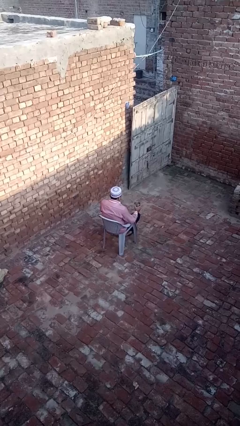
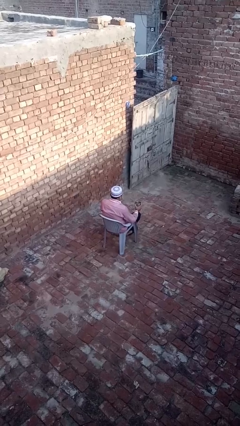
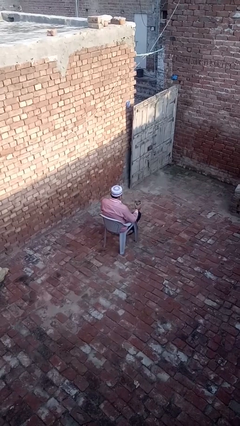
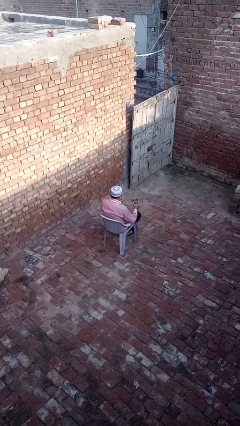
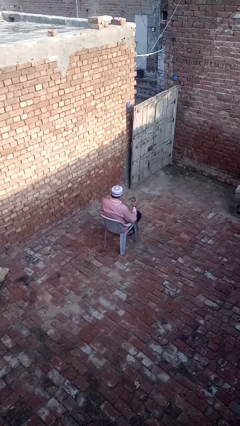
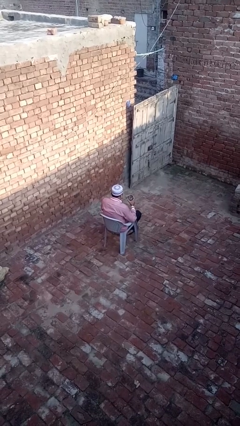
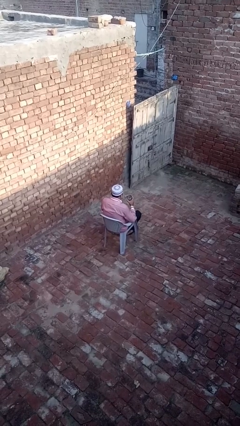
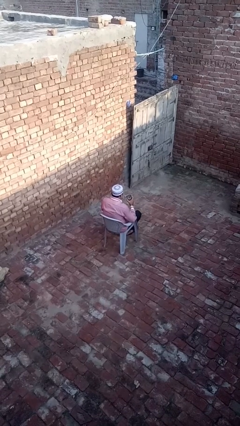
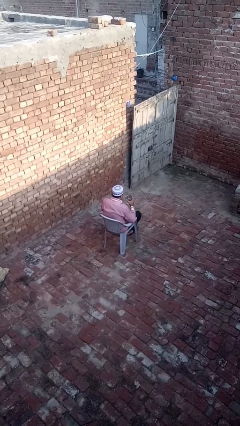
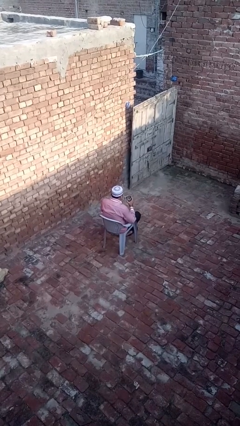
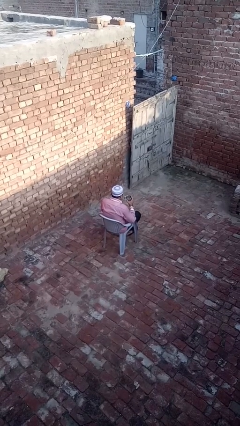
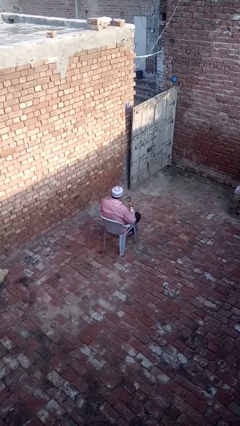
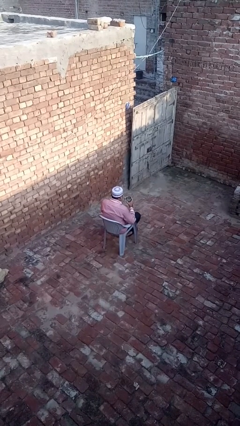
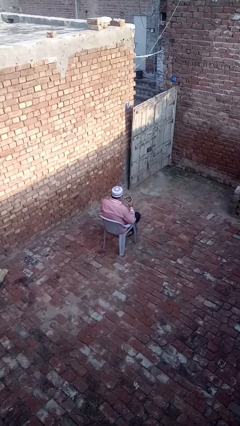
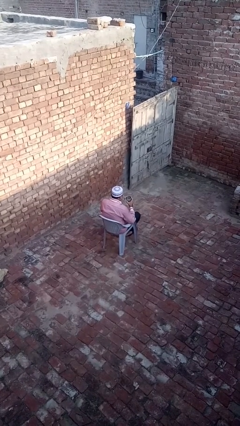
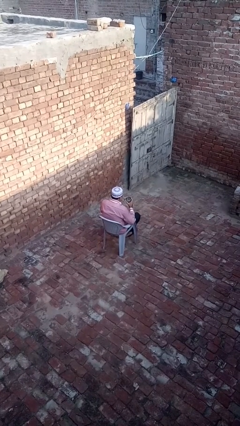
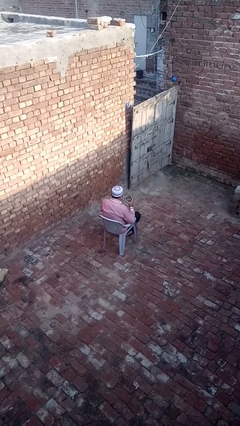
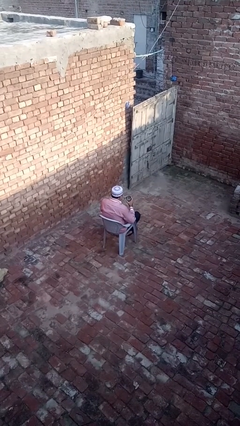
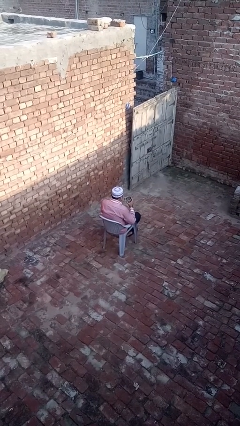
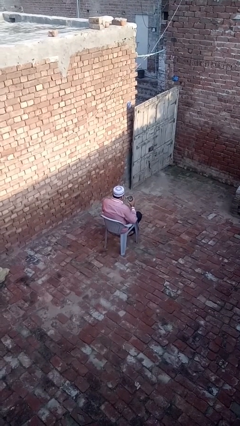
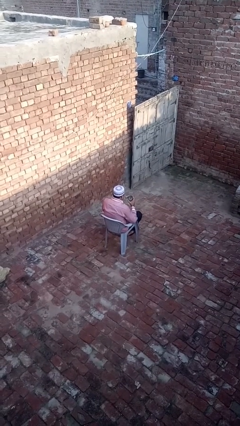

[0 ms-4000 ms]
person drinks from straw

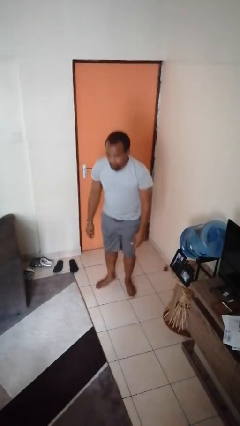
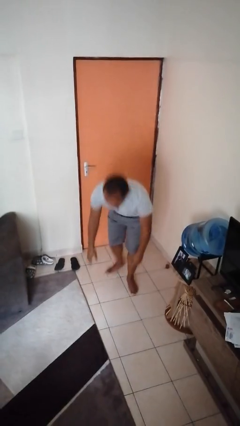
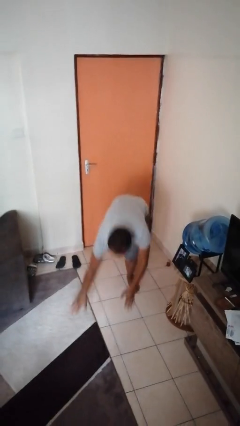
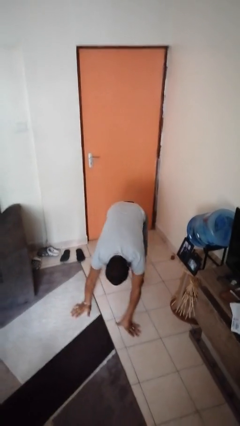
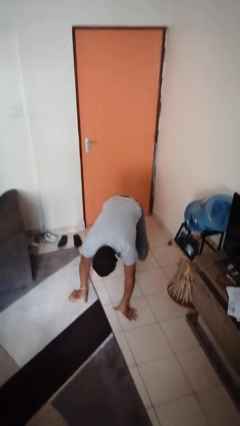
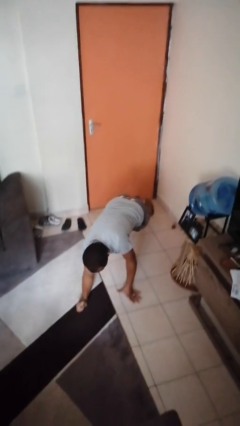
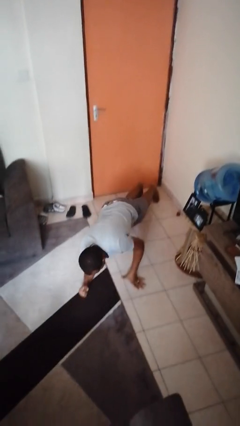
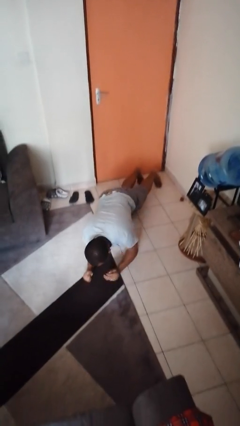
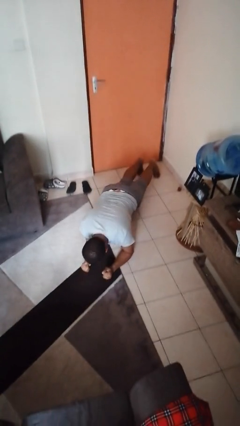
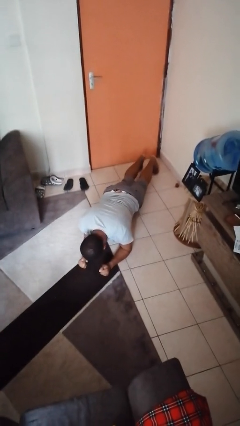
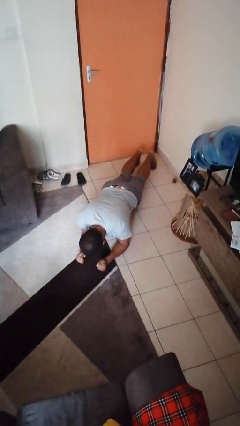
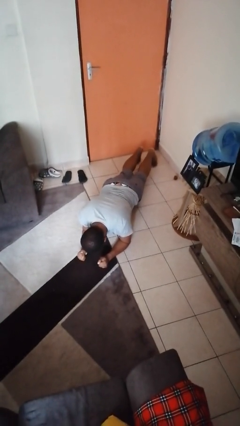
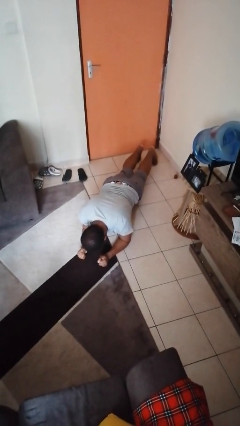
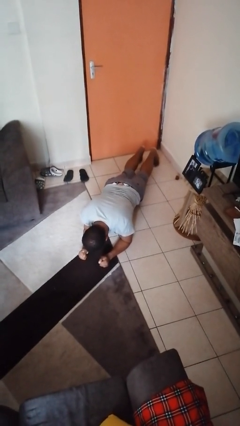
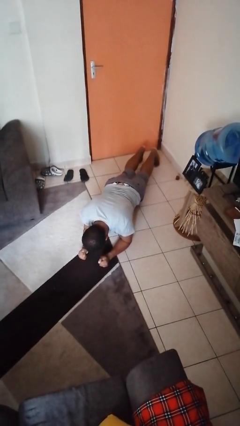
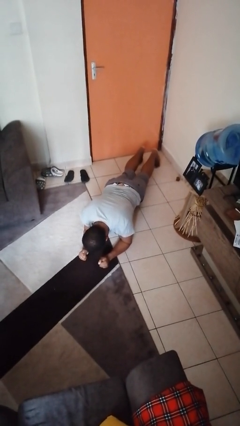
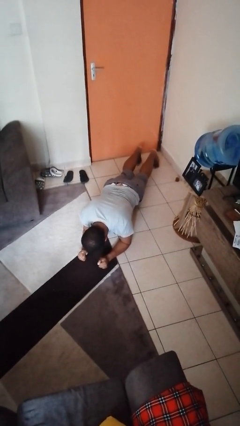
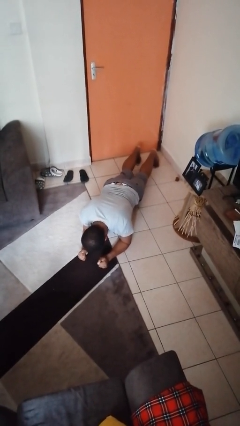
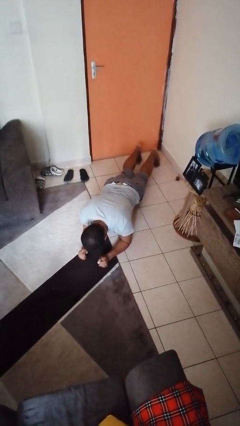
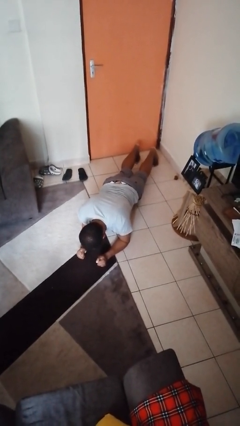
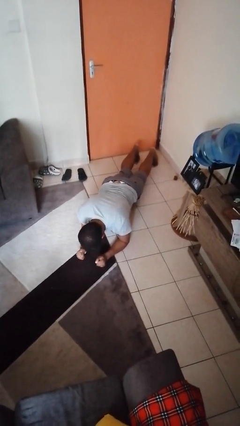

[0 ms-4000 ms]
person exercises with plank

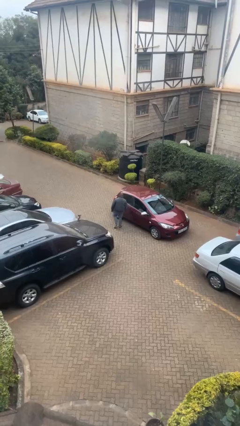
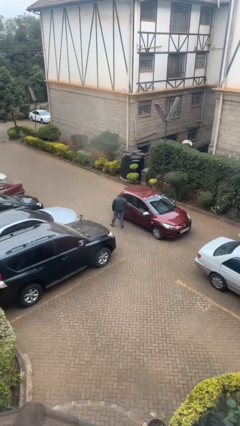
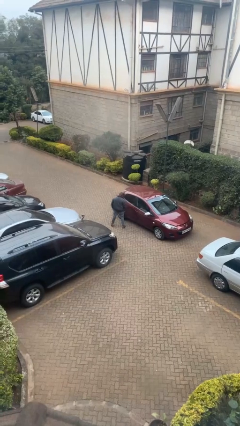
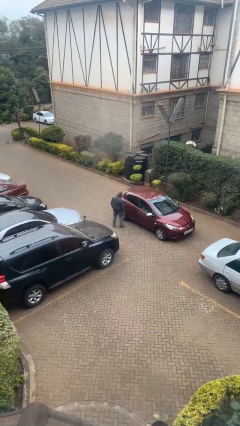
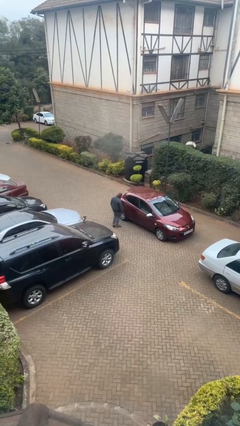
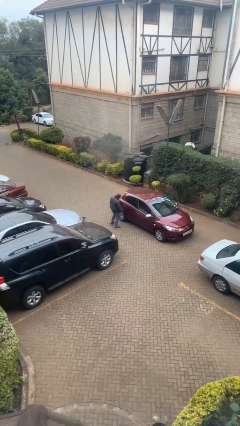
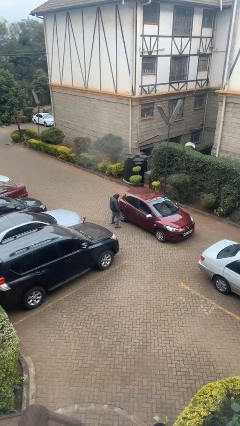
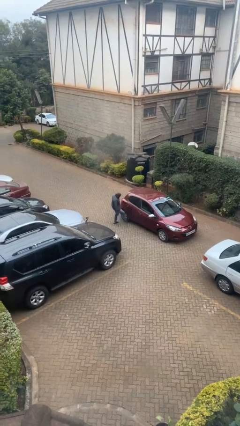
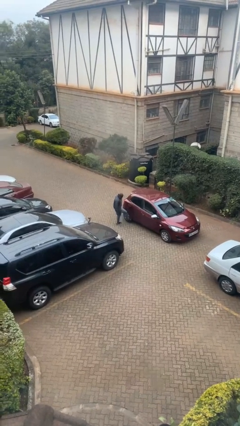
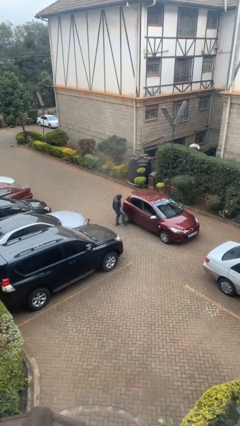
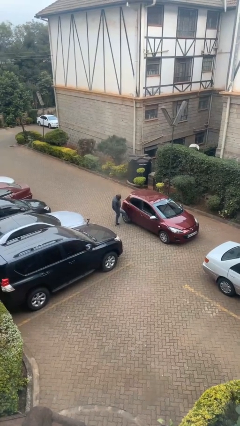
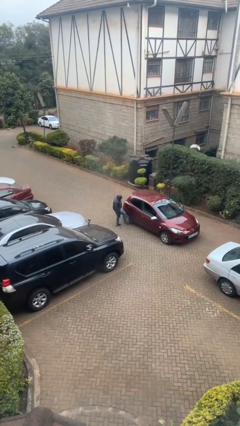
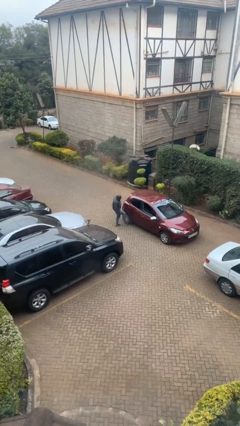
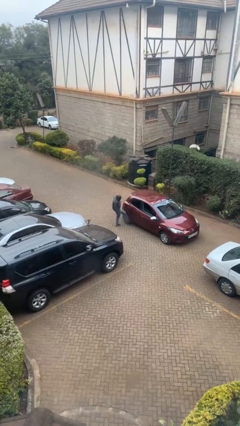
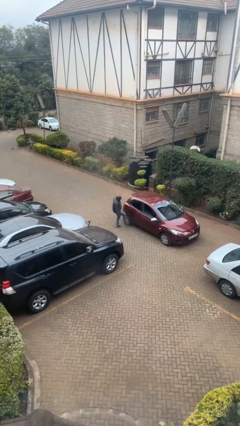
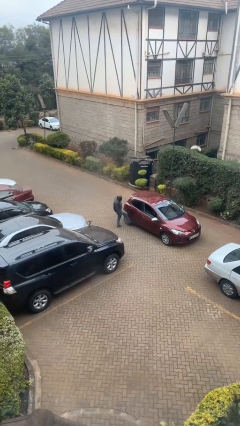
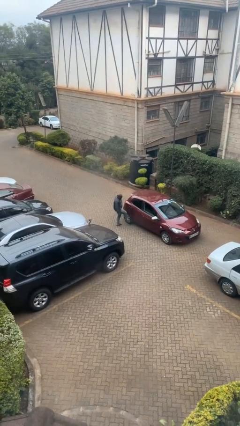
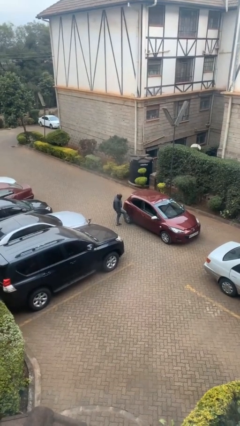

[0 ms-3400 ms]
person kicks car tires

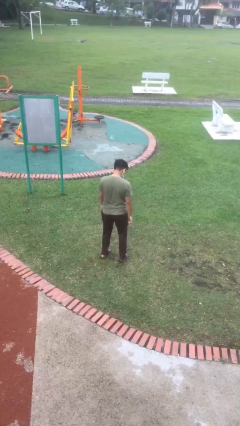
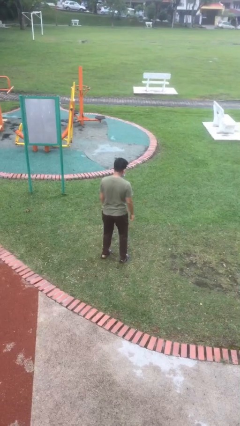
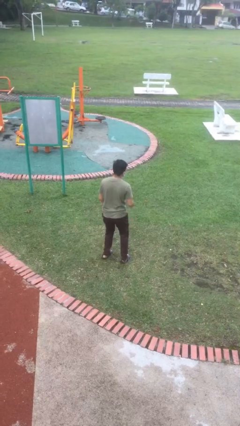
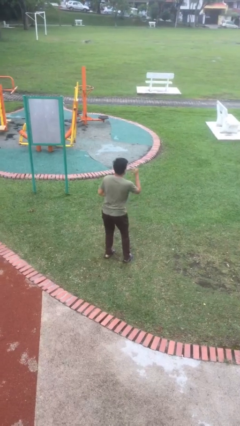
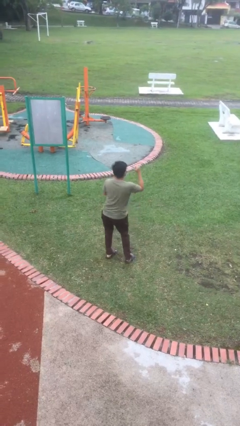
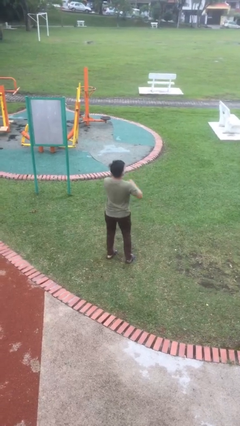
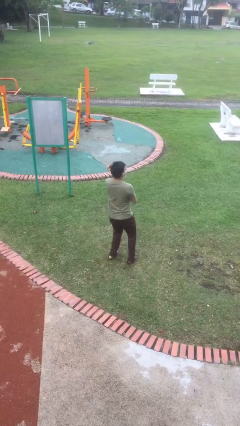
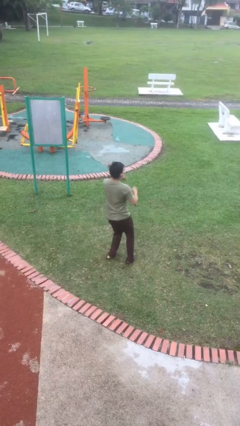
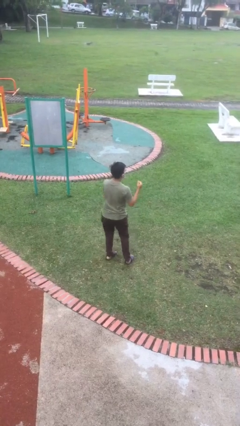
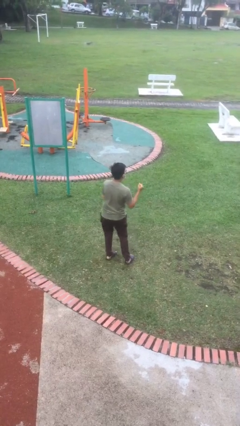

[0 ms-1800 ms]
person dances in place

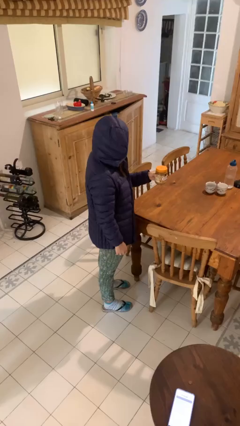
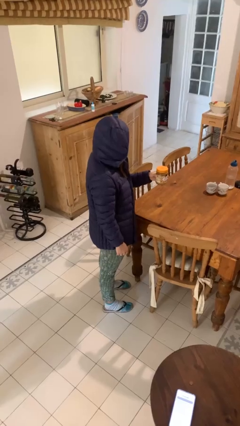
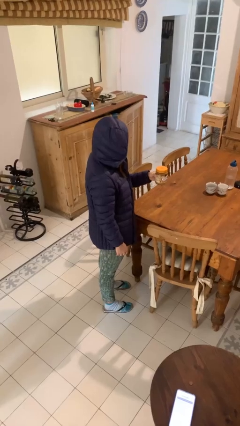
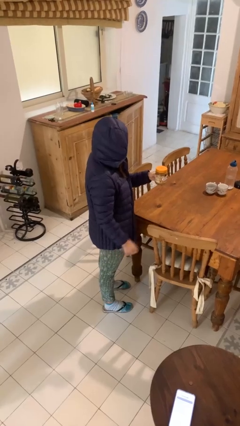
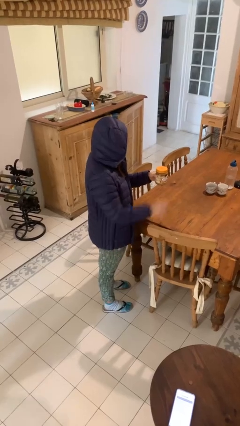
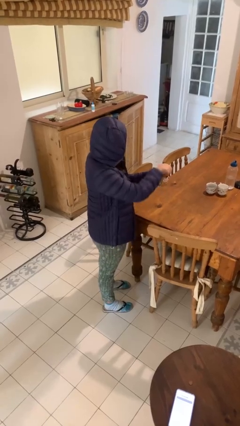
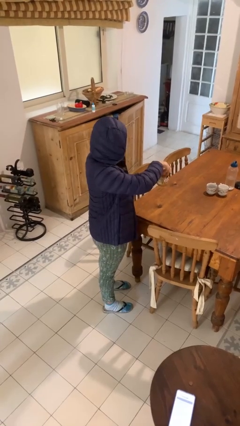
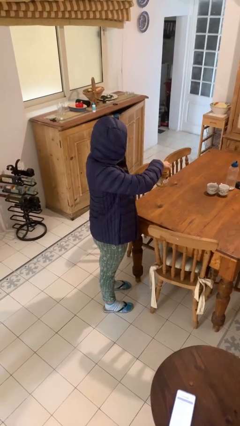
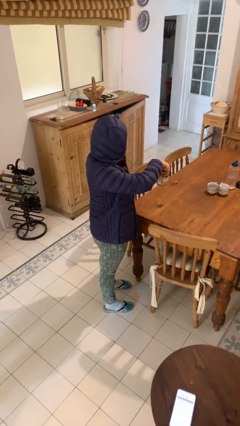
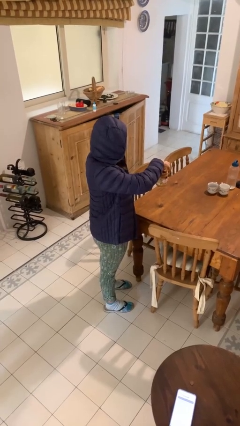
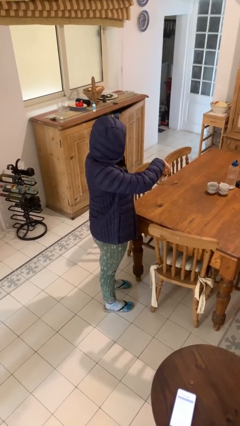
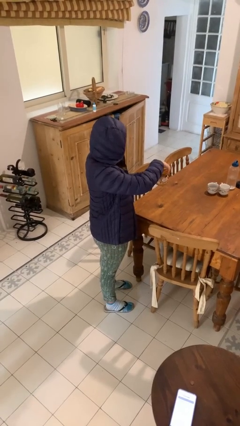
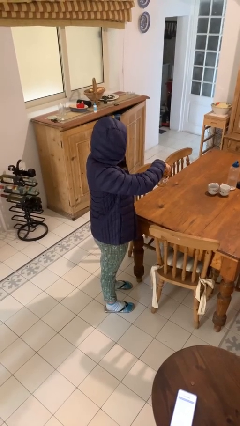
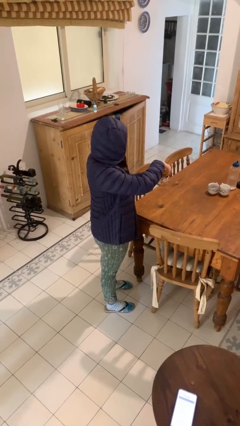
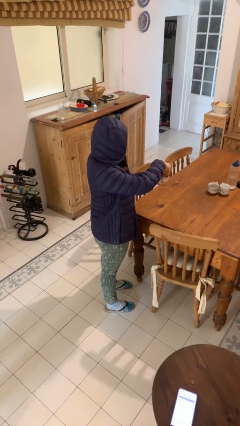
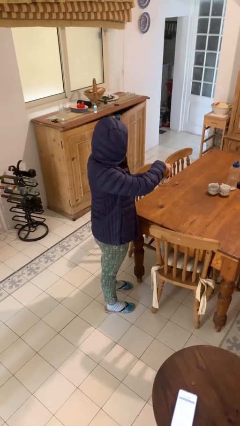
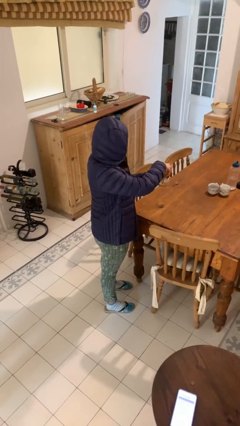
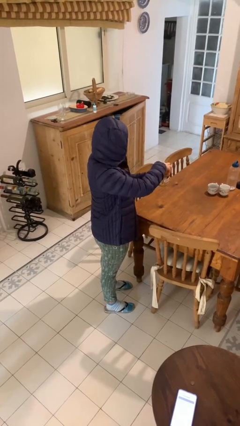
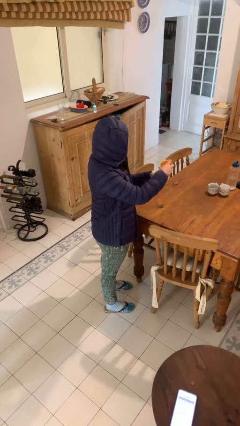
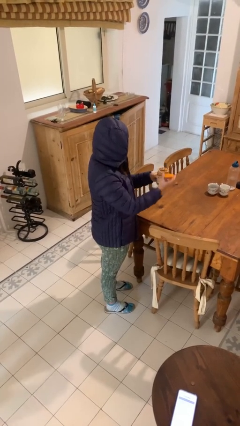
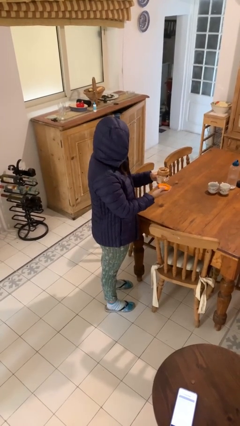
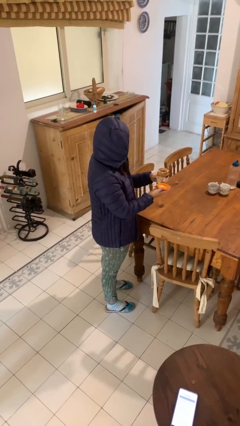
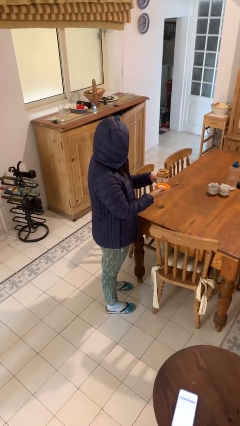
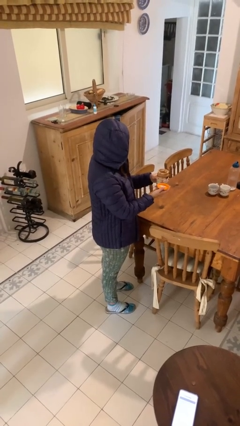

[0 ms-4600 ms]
person opens jar
